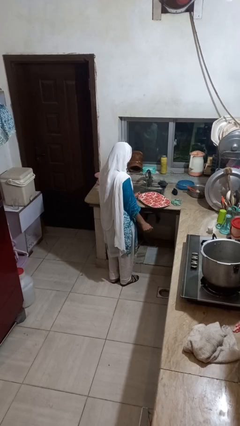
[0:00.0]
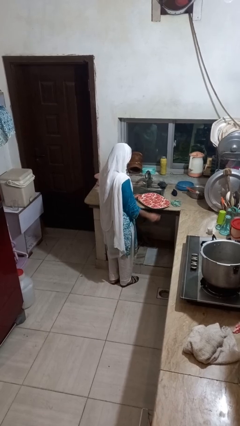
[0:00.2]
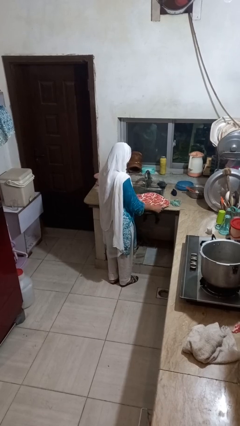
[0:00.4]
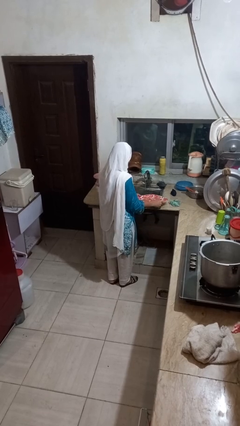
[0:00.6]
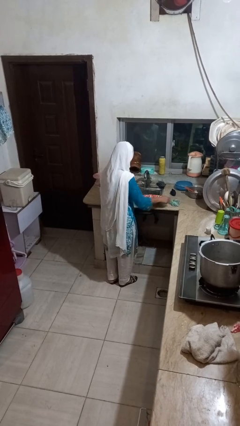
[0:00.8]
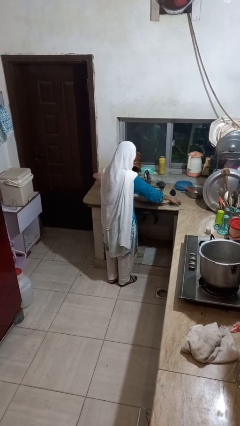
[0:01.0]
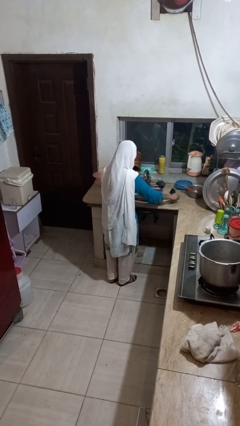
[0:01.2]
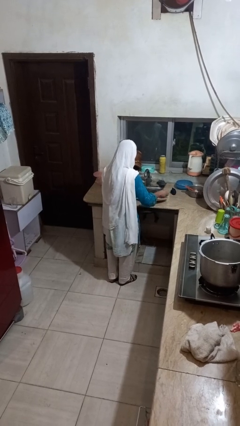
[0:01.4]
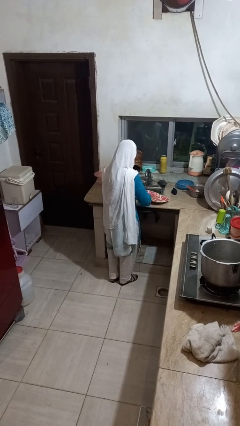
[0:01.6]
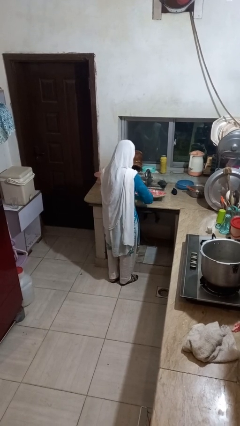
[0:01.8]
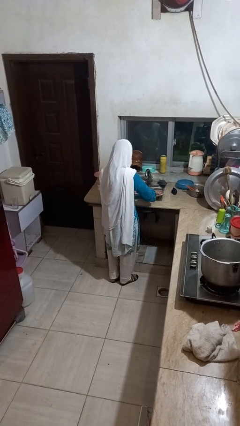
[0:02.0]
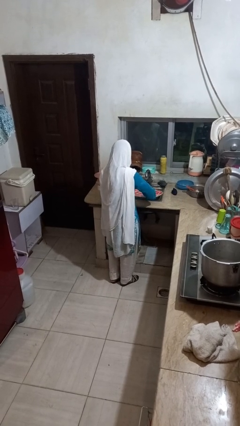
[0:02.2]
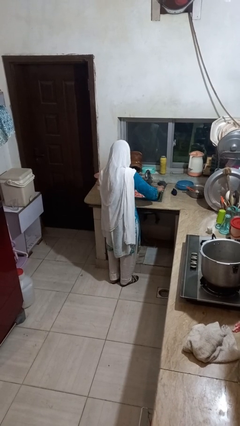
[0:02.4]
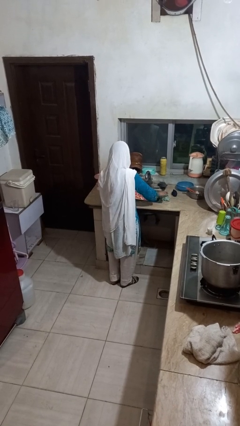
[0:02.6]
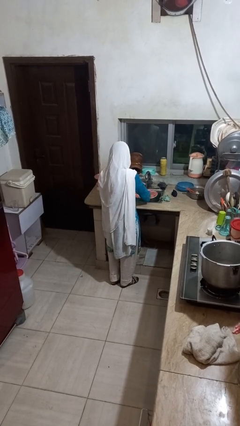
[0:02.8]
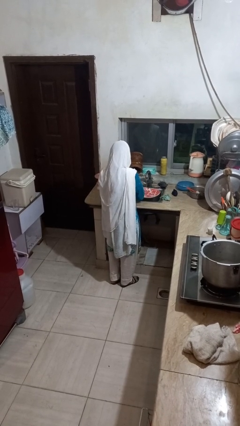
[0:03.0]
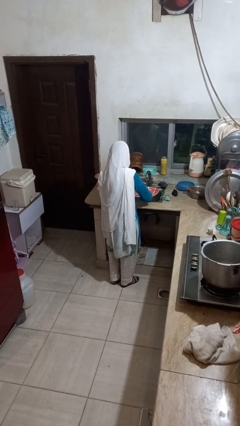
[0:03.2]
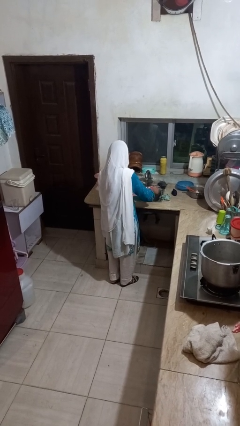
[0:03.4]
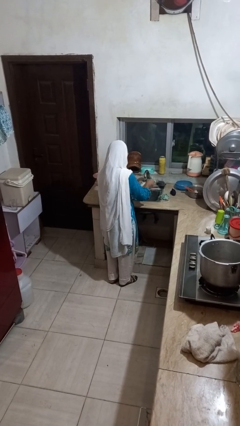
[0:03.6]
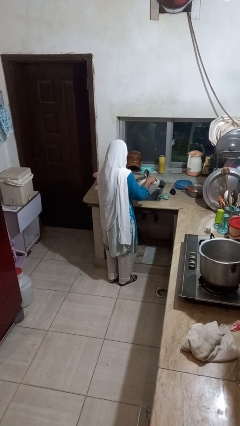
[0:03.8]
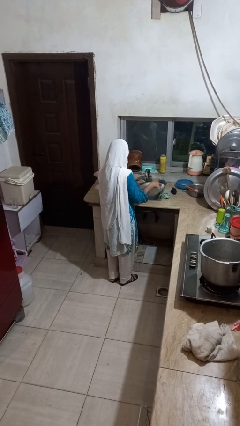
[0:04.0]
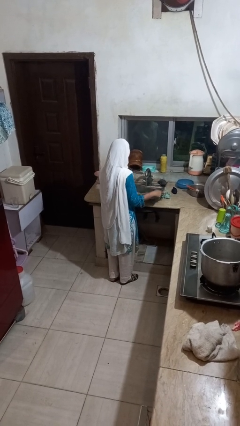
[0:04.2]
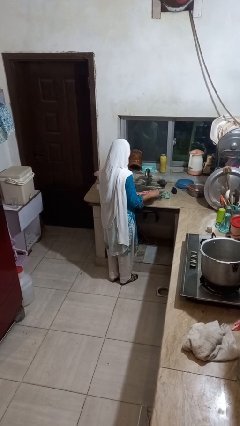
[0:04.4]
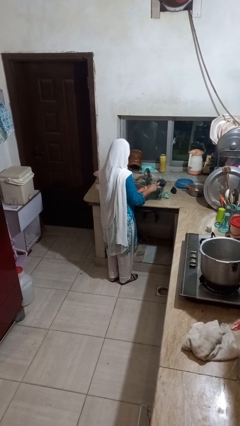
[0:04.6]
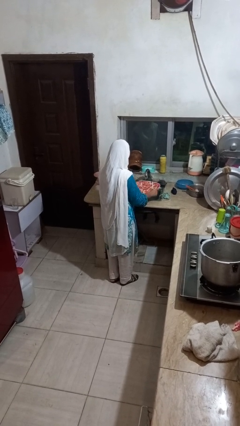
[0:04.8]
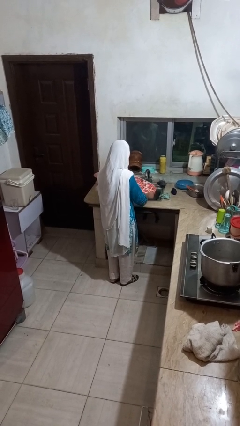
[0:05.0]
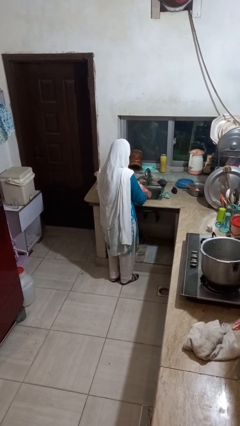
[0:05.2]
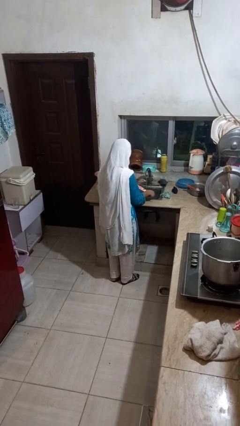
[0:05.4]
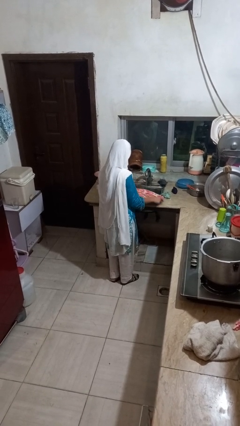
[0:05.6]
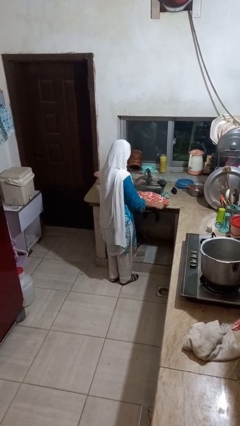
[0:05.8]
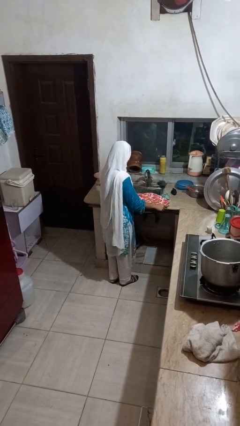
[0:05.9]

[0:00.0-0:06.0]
person washes dish

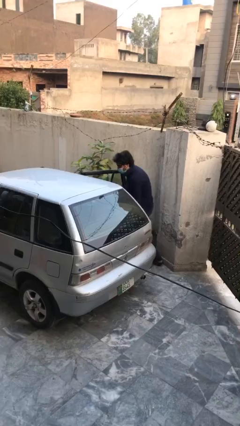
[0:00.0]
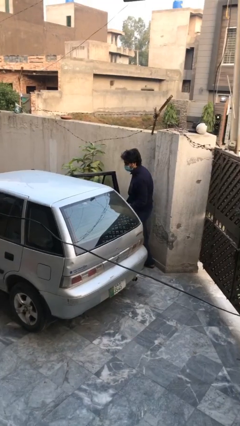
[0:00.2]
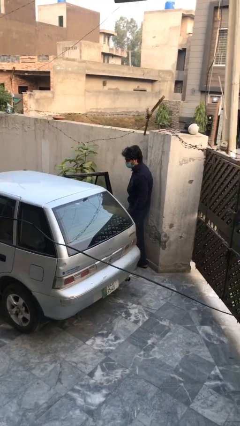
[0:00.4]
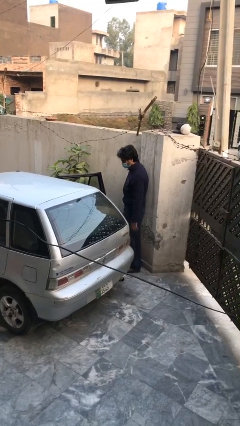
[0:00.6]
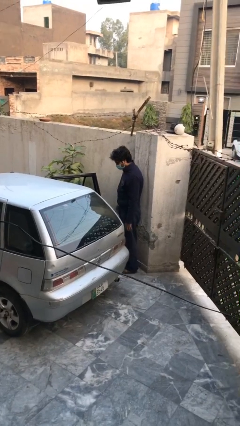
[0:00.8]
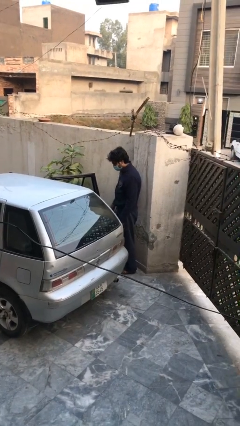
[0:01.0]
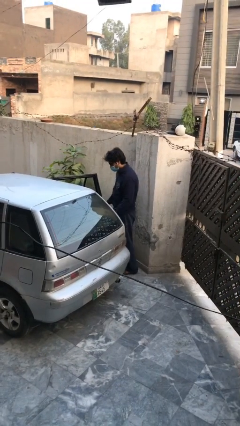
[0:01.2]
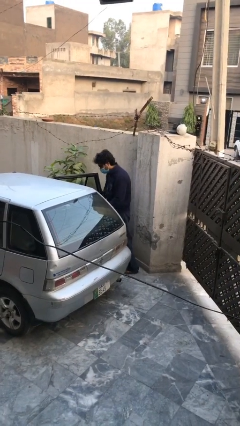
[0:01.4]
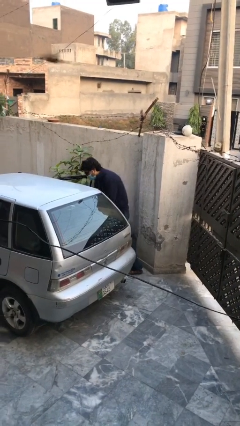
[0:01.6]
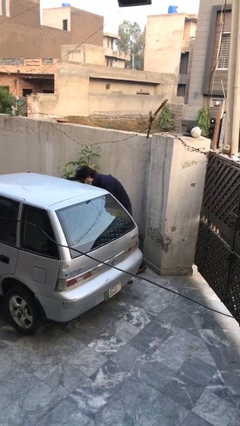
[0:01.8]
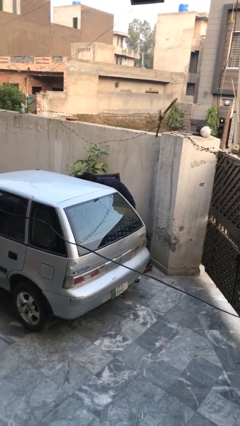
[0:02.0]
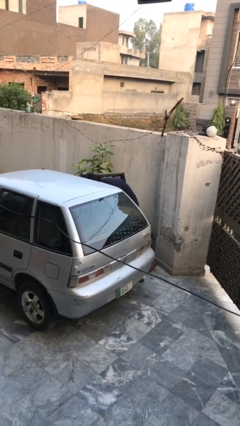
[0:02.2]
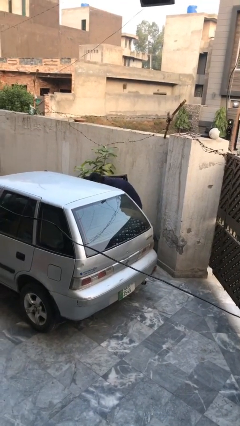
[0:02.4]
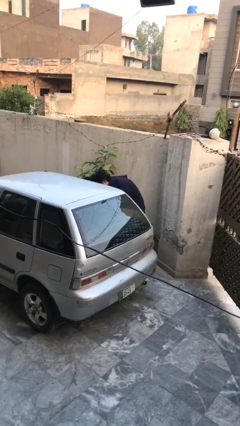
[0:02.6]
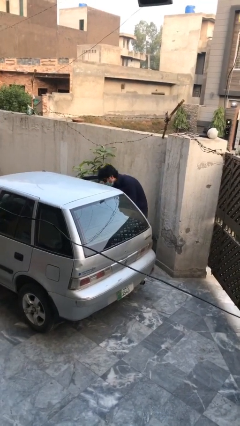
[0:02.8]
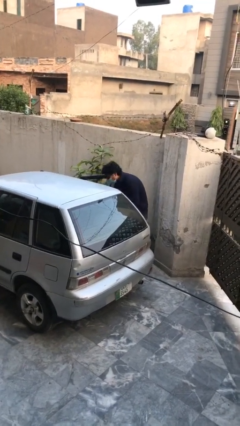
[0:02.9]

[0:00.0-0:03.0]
person unloads car

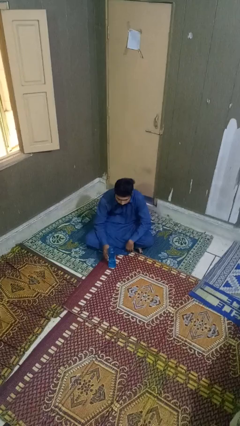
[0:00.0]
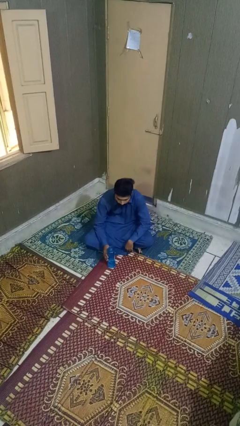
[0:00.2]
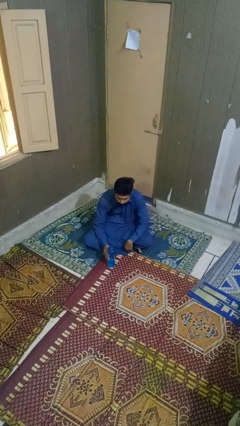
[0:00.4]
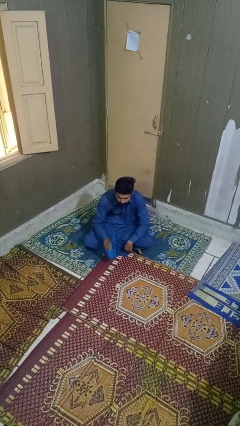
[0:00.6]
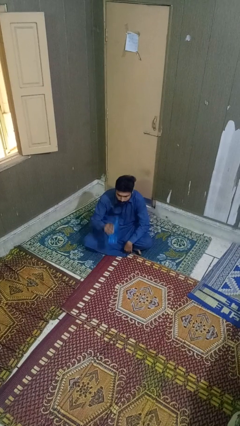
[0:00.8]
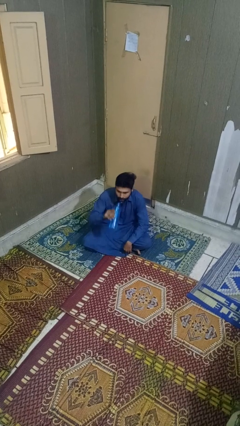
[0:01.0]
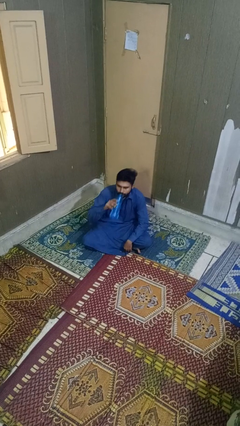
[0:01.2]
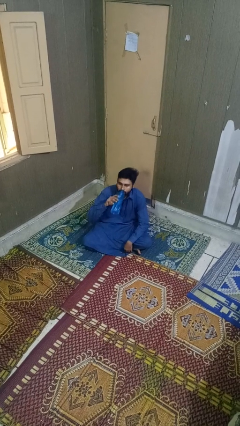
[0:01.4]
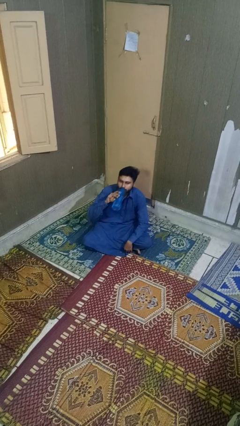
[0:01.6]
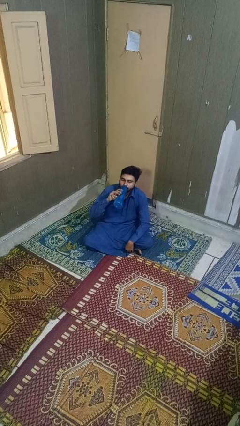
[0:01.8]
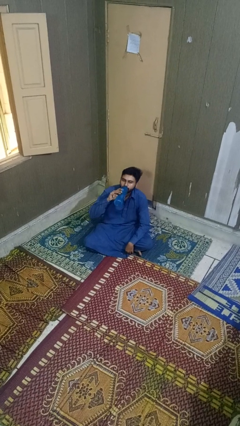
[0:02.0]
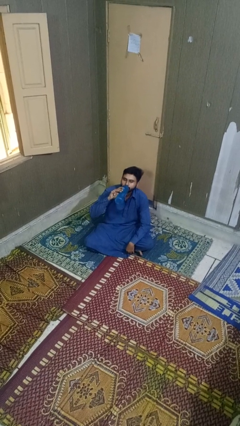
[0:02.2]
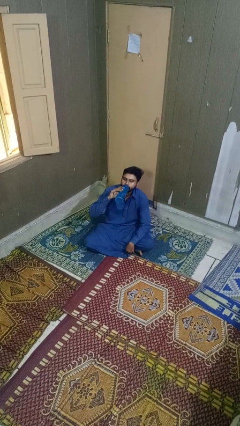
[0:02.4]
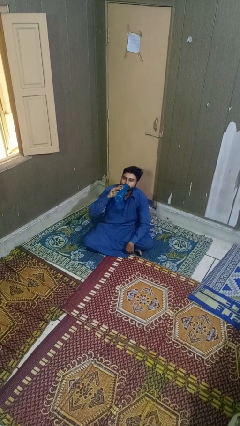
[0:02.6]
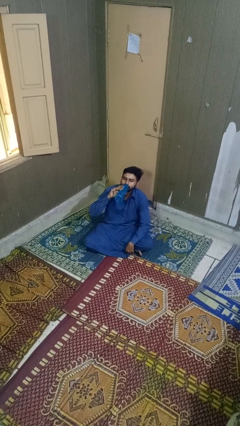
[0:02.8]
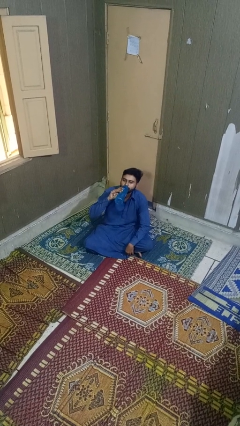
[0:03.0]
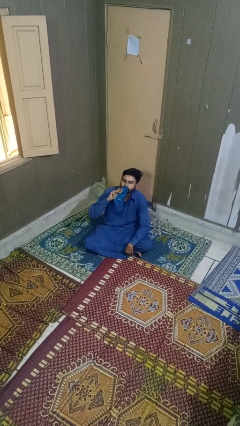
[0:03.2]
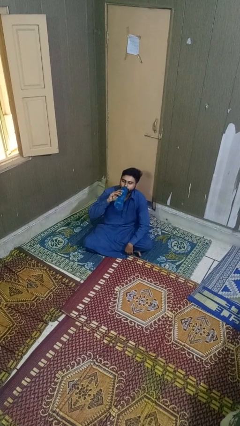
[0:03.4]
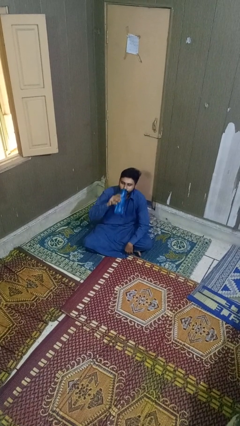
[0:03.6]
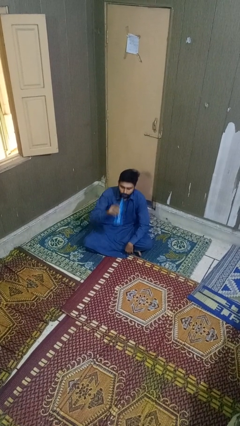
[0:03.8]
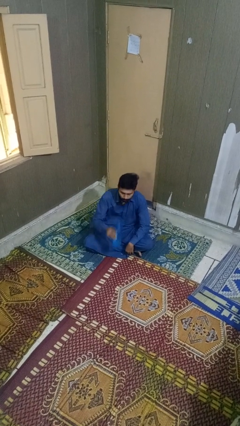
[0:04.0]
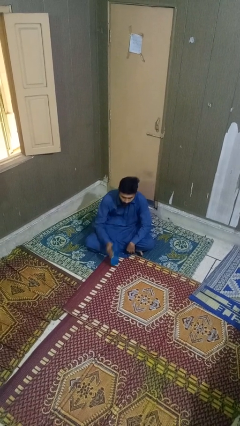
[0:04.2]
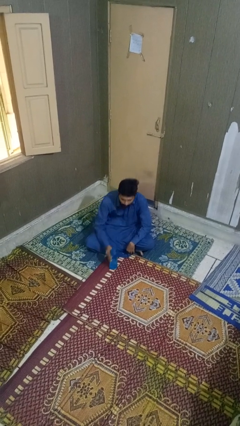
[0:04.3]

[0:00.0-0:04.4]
person drinks from bottle

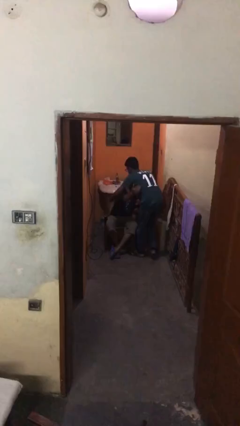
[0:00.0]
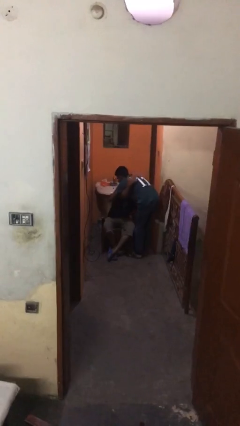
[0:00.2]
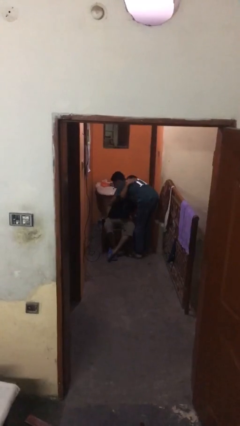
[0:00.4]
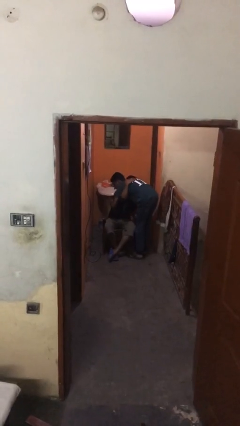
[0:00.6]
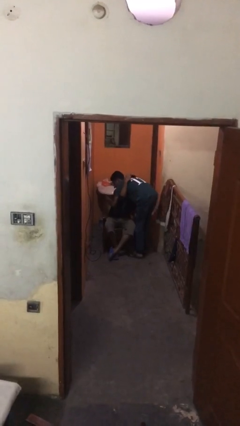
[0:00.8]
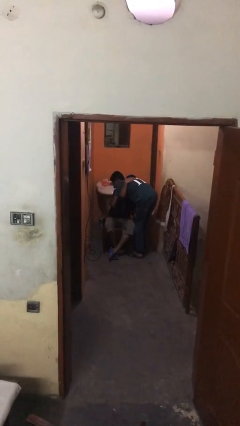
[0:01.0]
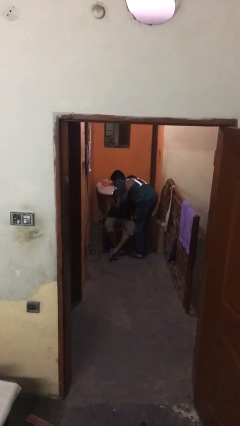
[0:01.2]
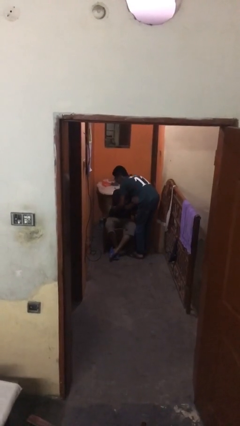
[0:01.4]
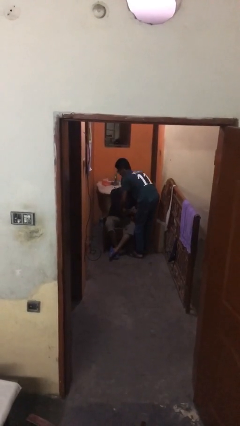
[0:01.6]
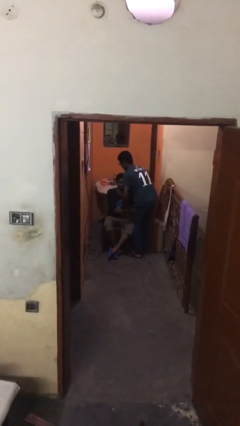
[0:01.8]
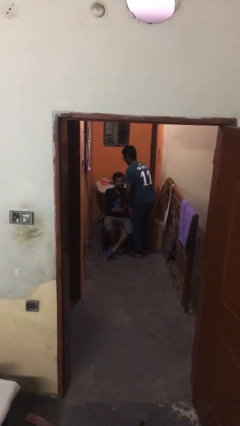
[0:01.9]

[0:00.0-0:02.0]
person embraces person

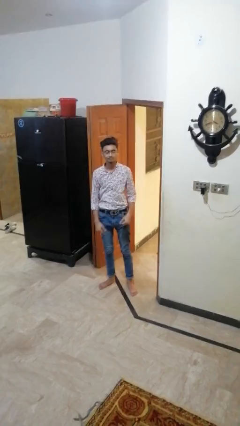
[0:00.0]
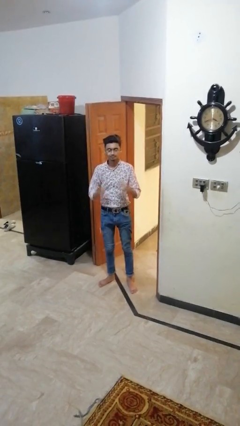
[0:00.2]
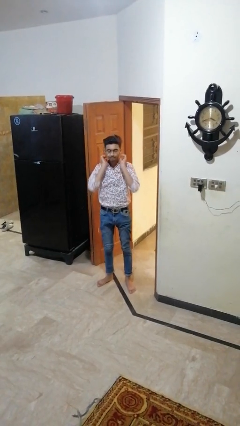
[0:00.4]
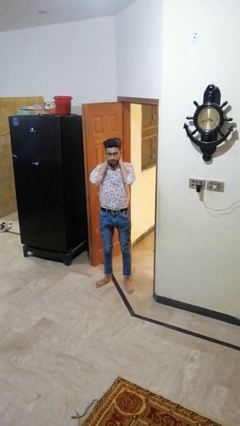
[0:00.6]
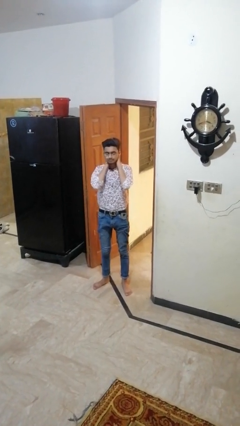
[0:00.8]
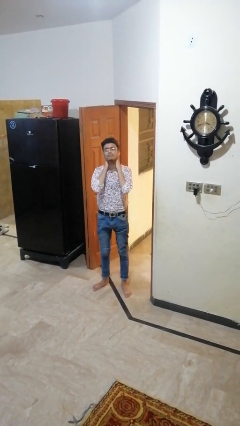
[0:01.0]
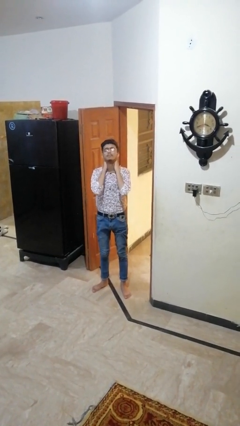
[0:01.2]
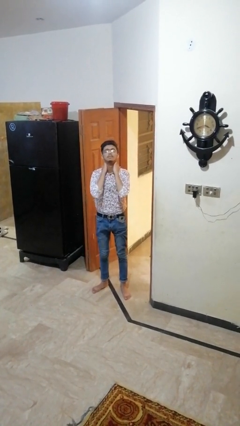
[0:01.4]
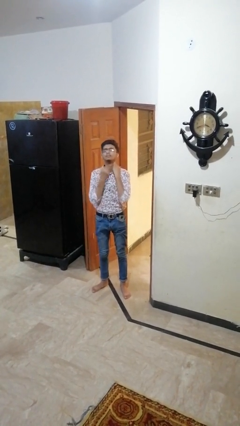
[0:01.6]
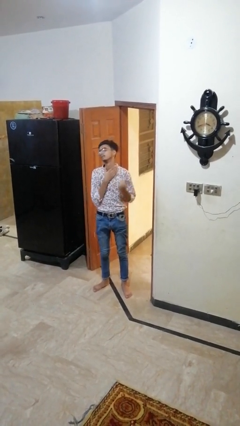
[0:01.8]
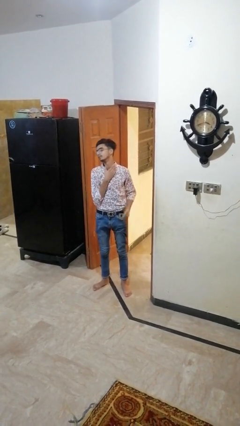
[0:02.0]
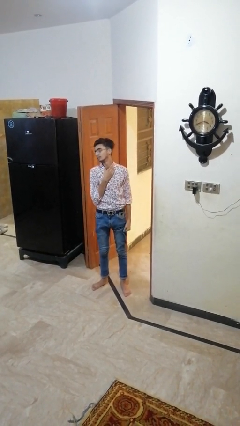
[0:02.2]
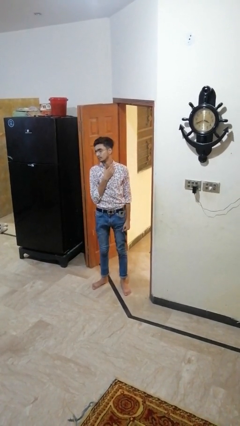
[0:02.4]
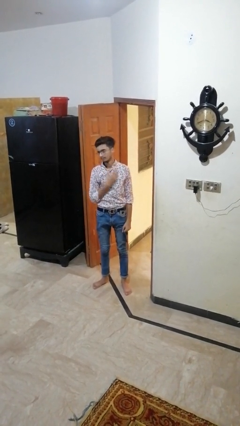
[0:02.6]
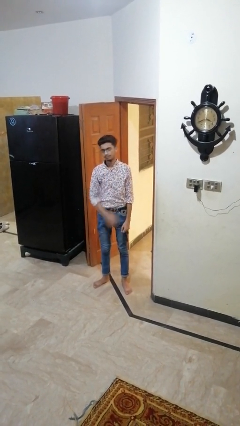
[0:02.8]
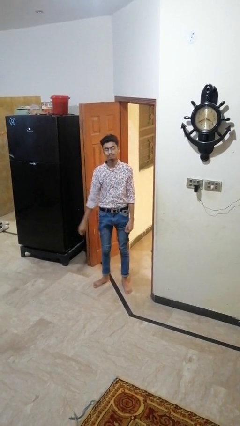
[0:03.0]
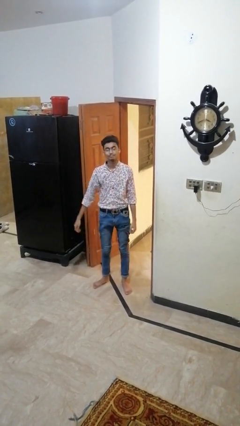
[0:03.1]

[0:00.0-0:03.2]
person rubs neck
